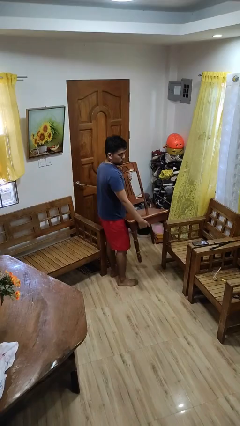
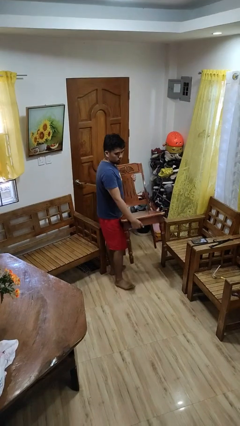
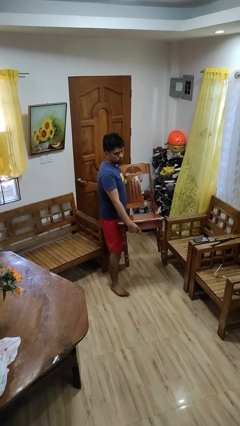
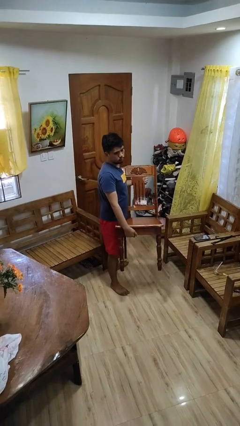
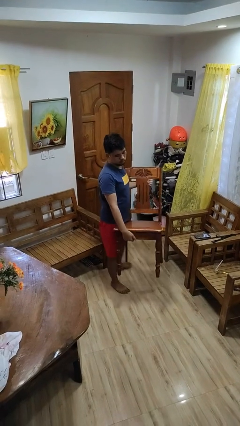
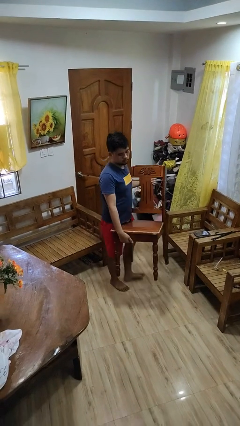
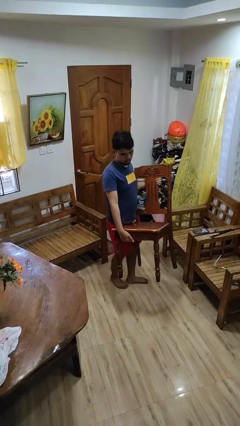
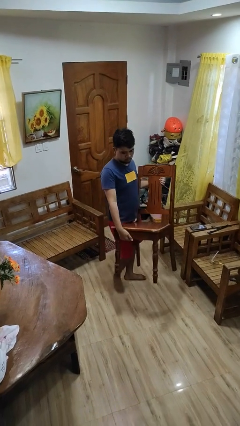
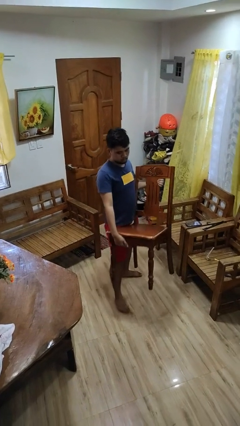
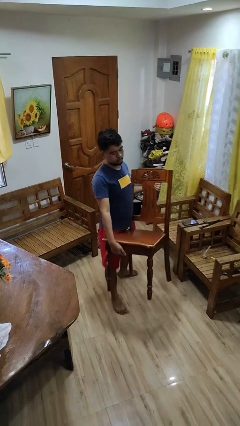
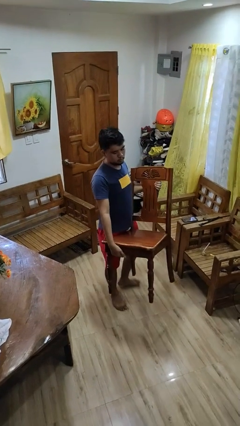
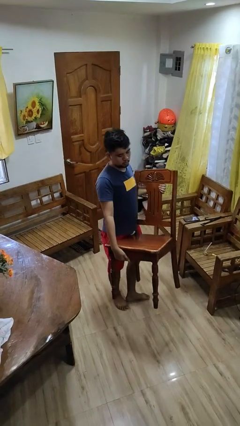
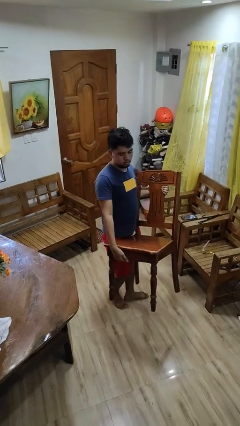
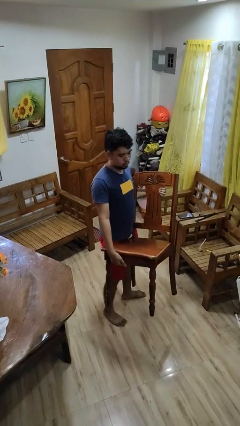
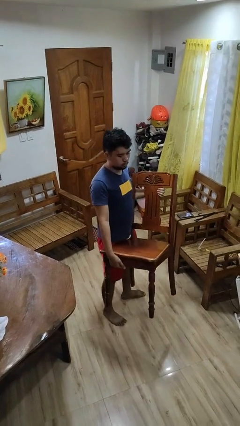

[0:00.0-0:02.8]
person carries furniture

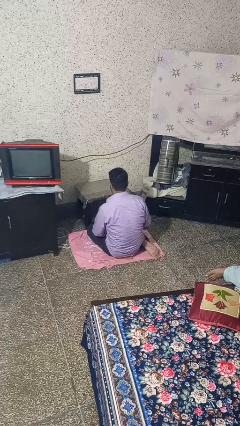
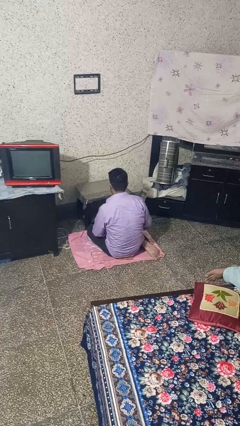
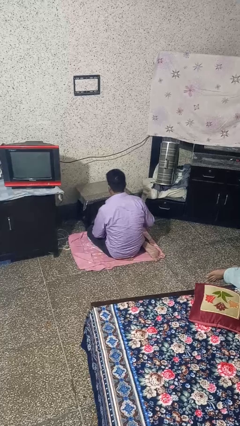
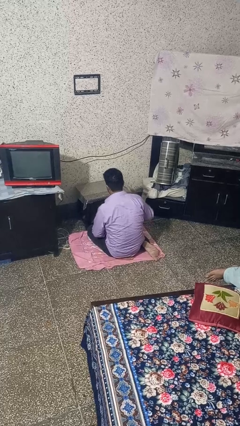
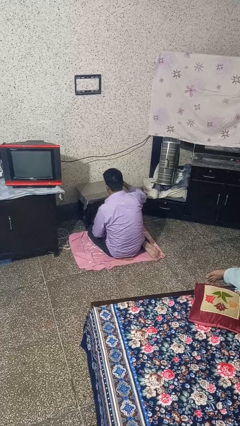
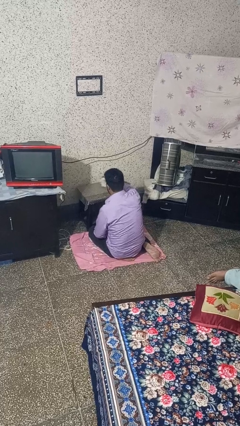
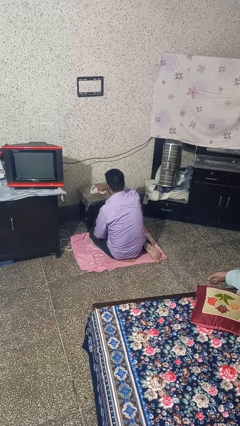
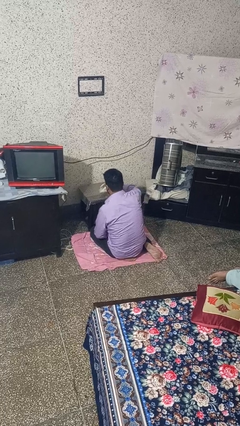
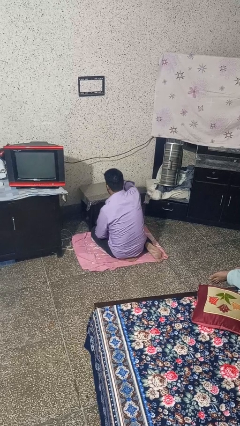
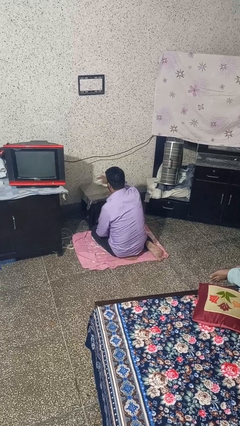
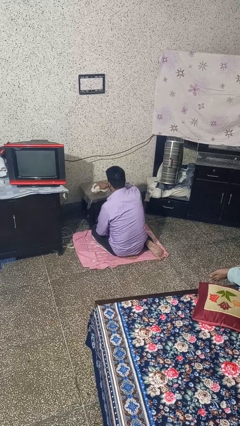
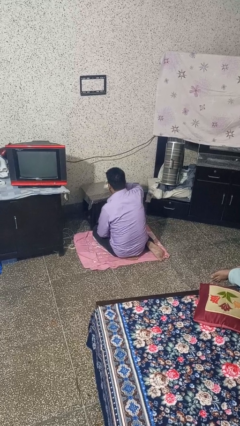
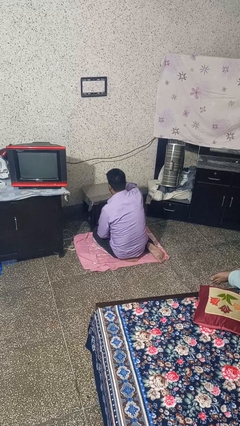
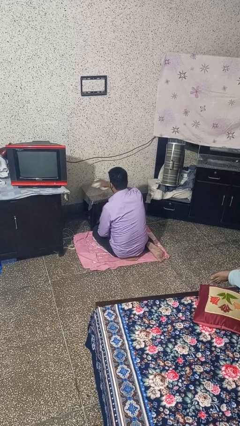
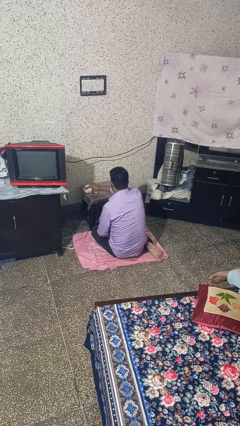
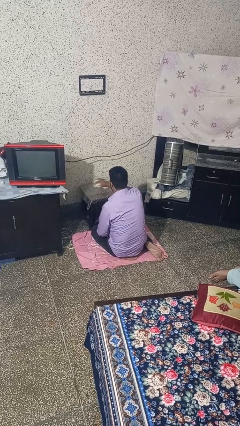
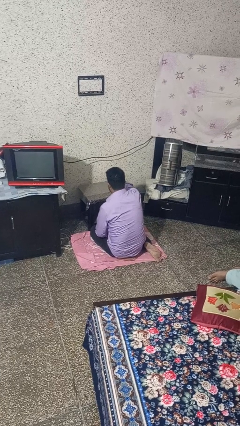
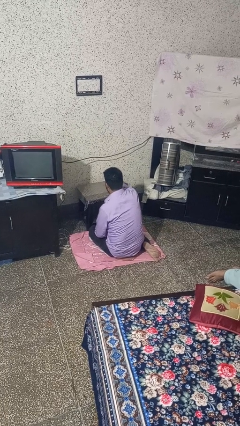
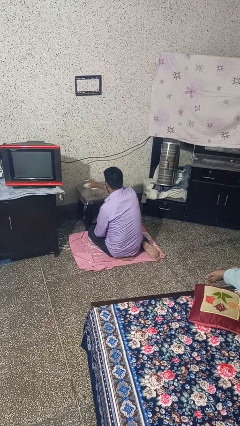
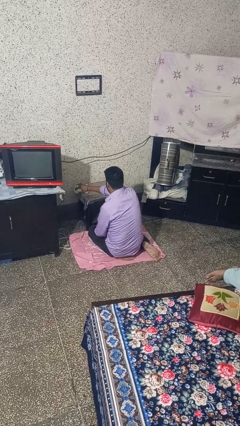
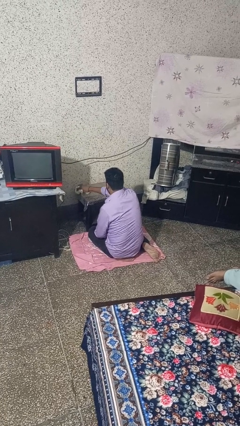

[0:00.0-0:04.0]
person cleans table with rag

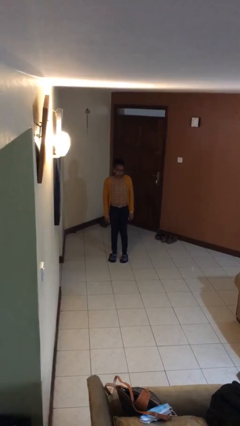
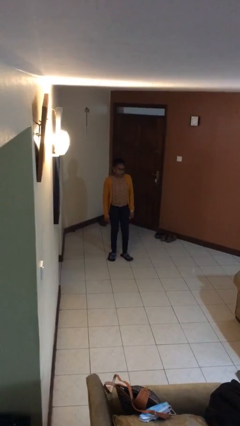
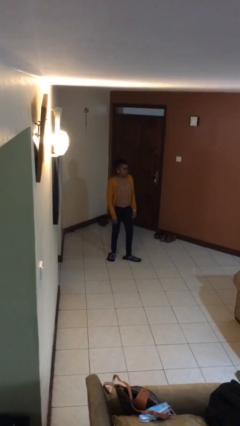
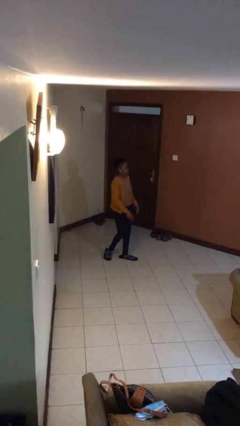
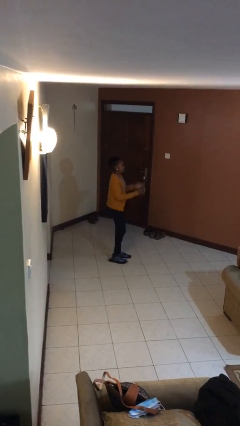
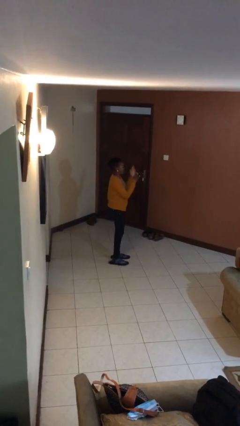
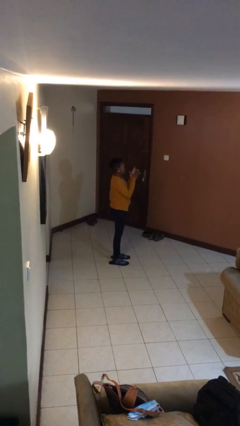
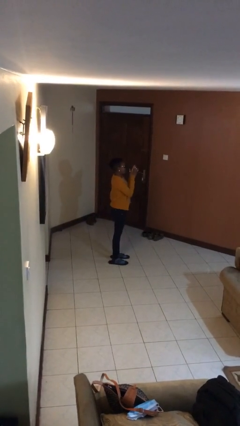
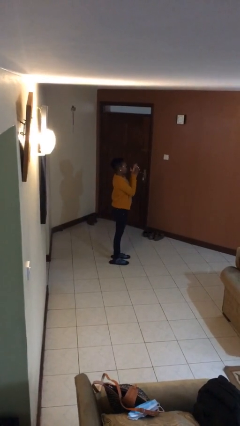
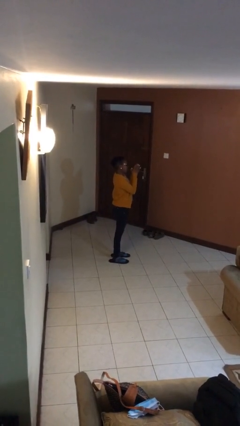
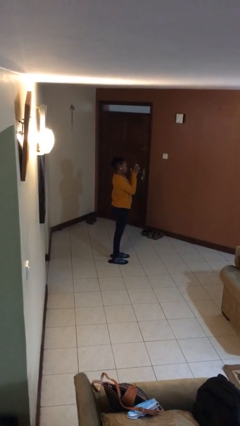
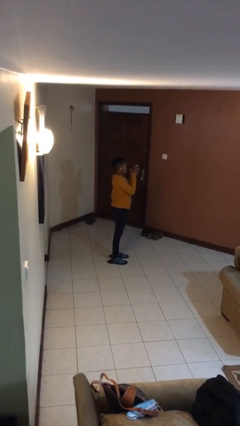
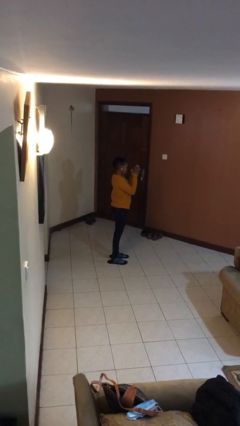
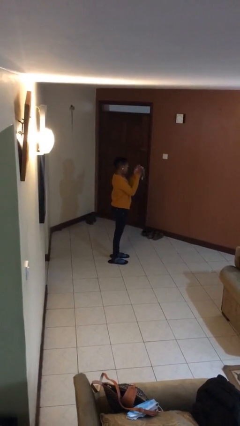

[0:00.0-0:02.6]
person claps hands

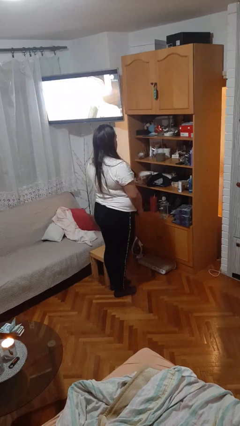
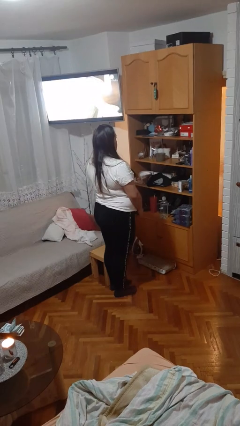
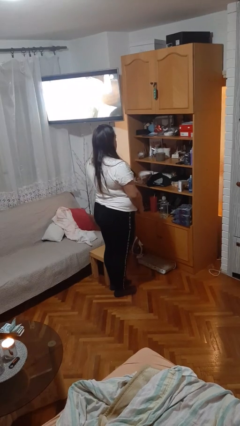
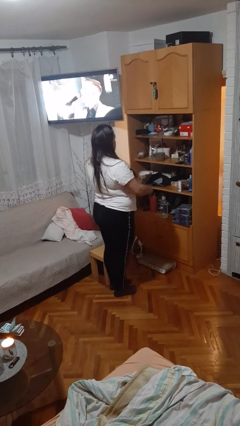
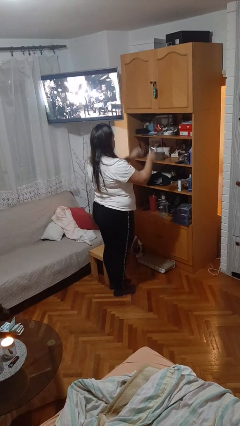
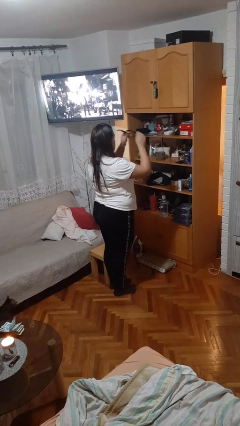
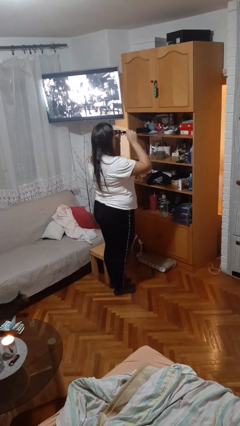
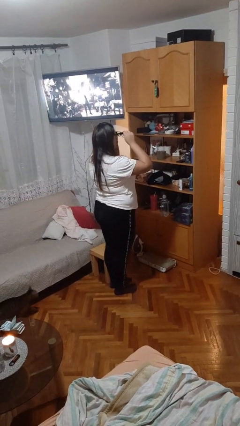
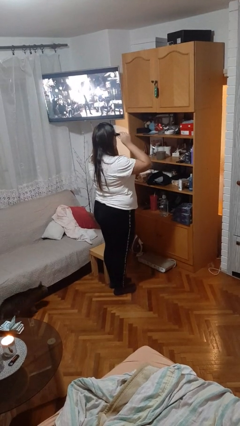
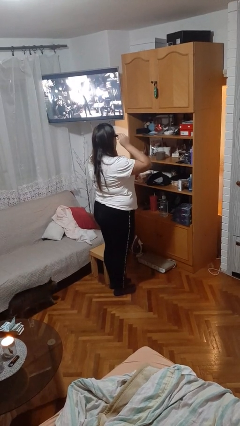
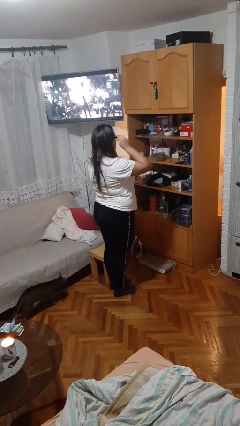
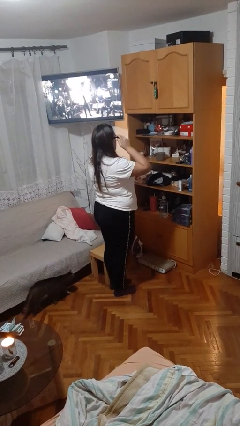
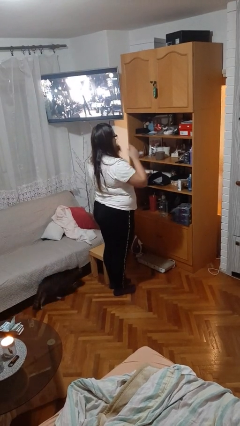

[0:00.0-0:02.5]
person puts on glasses

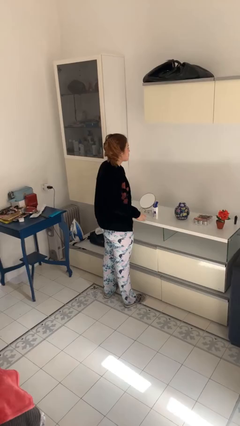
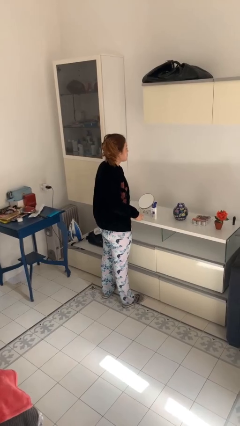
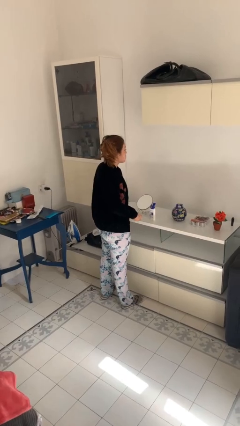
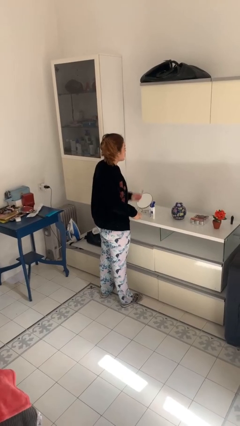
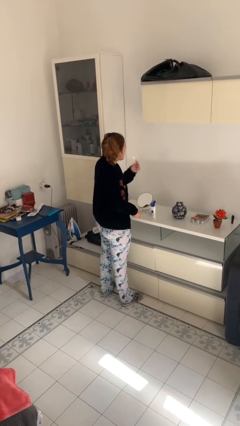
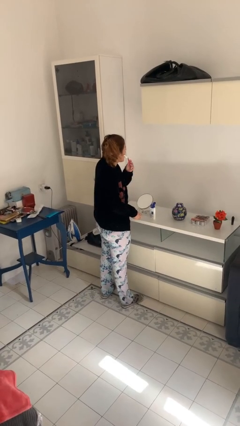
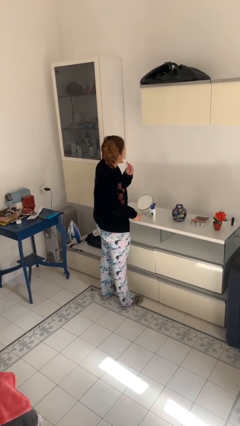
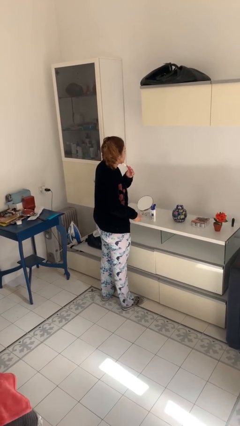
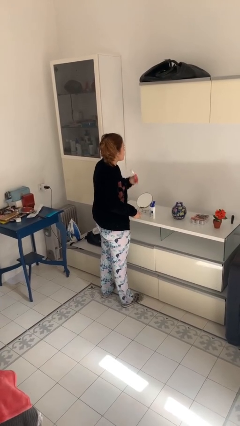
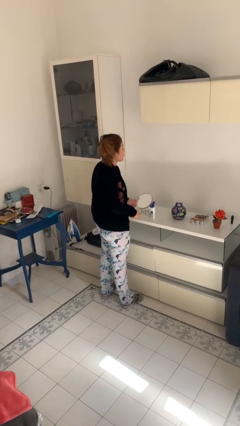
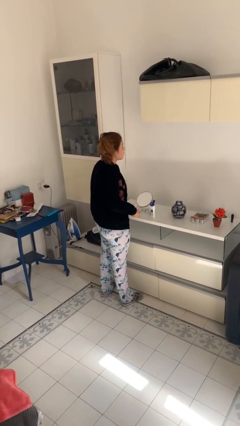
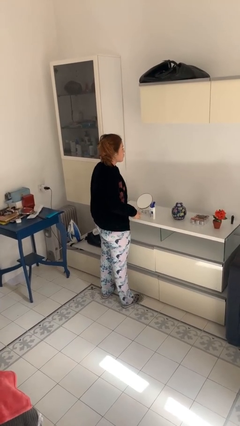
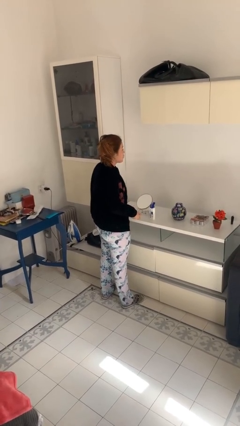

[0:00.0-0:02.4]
person shaves face

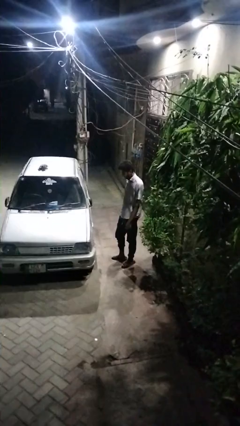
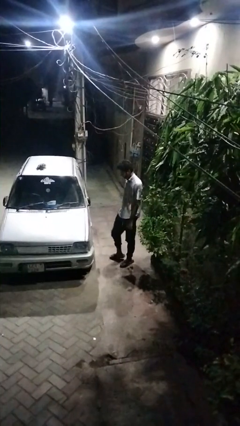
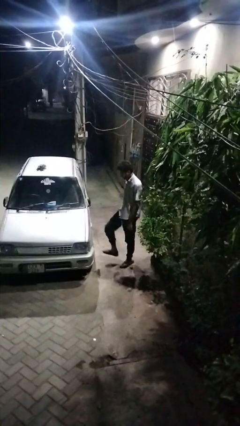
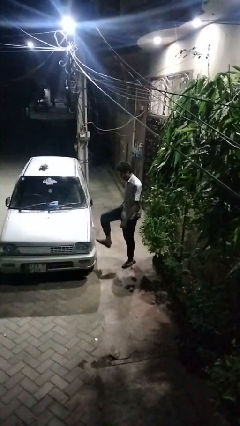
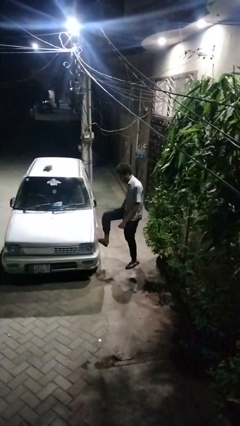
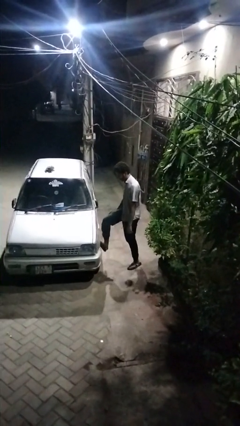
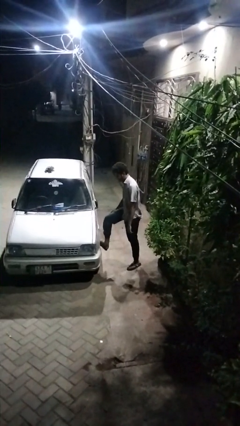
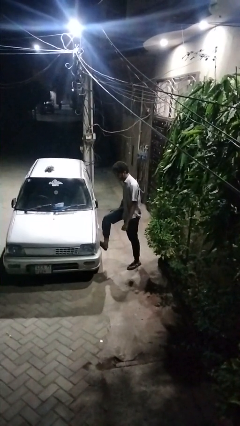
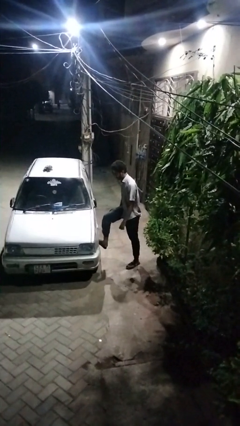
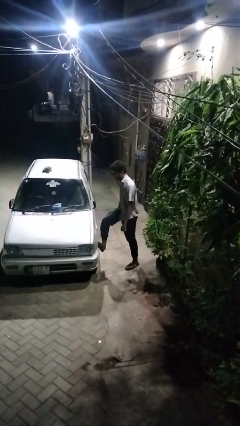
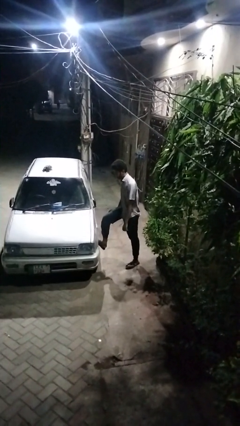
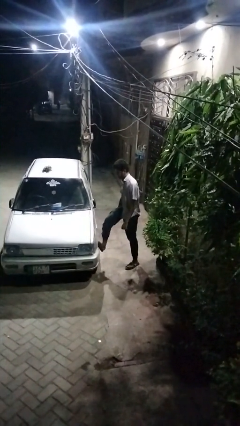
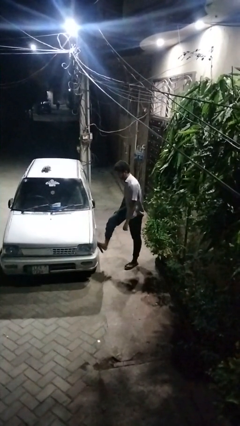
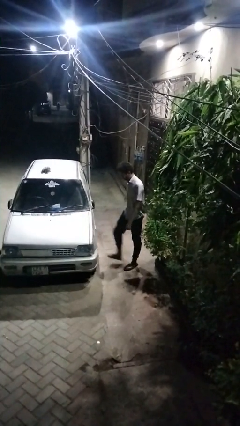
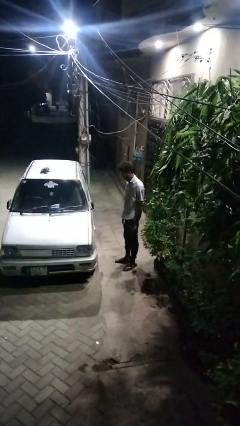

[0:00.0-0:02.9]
person kicks car tires

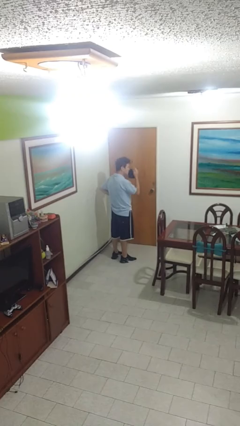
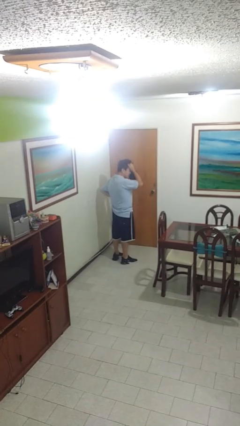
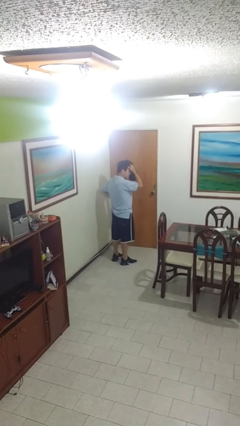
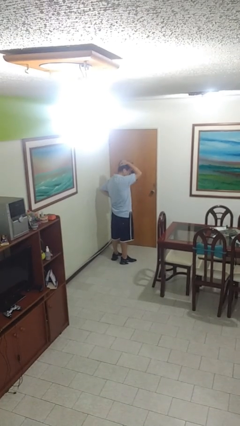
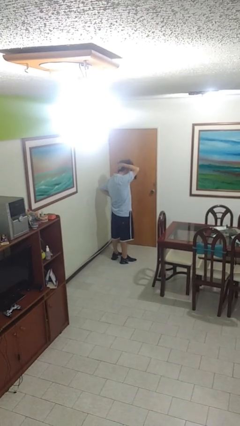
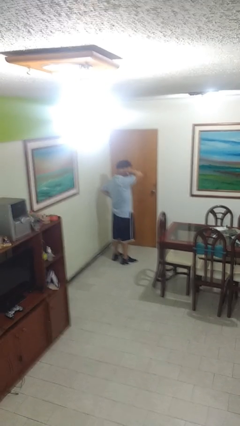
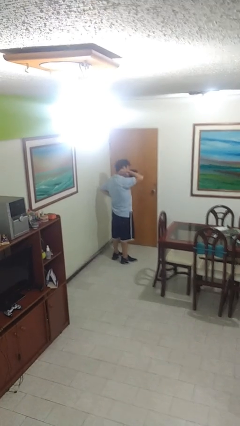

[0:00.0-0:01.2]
person strokes hair
